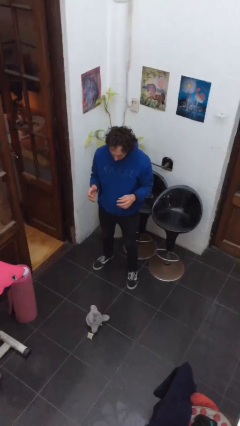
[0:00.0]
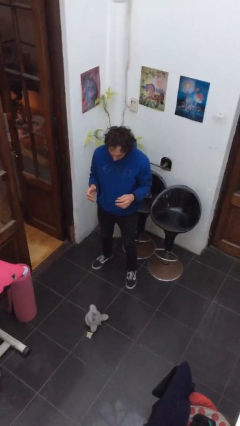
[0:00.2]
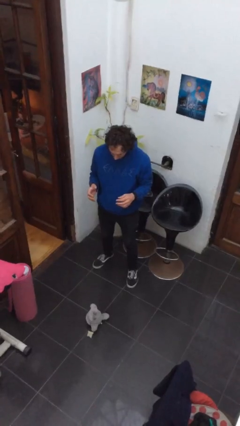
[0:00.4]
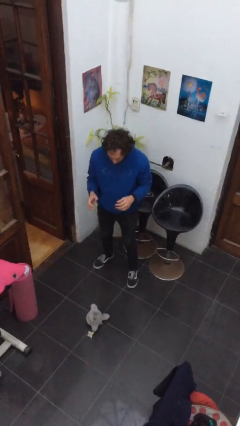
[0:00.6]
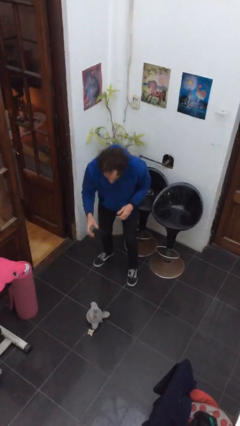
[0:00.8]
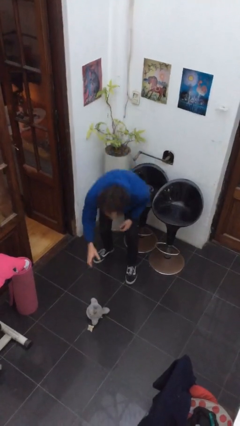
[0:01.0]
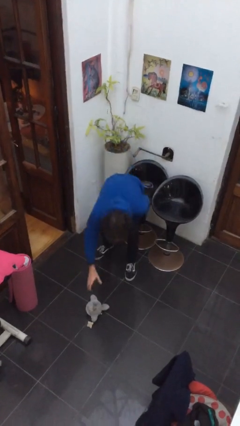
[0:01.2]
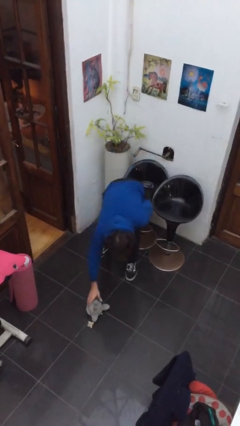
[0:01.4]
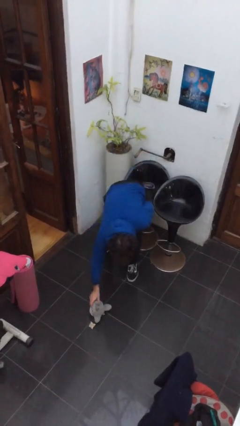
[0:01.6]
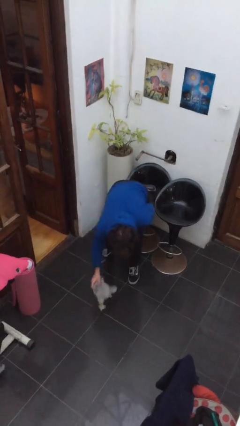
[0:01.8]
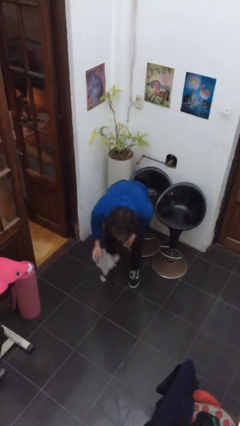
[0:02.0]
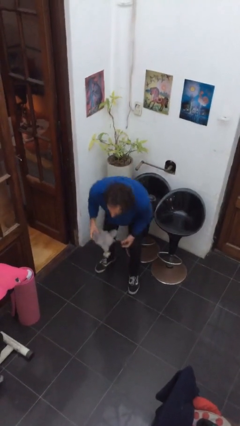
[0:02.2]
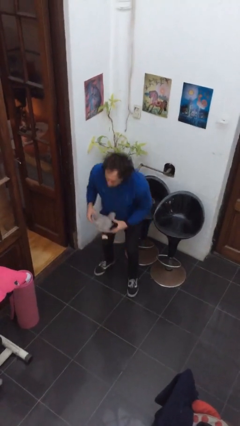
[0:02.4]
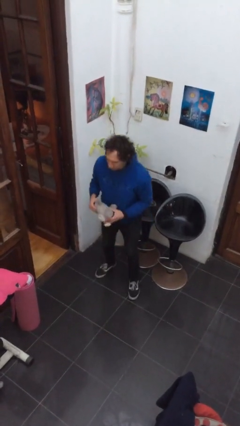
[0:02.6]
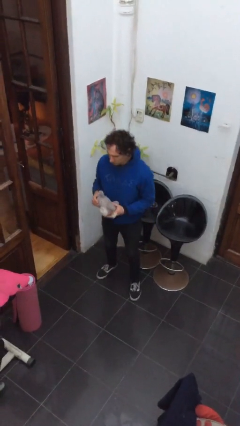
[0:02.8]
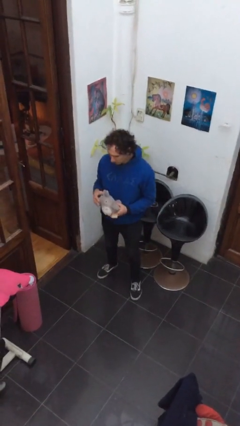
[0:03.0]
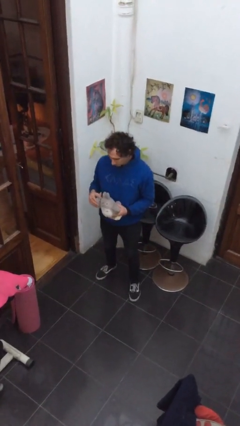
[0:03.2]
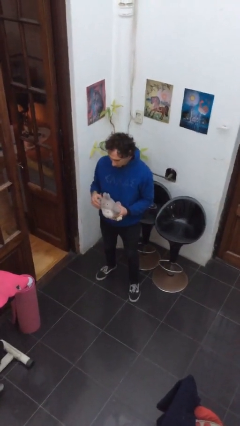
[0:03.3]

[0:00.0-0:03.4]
person picks up object from floor

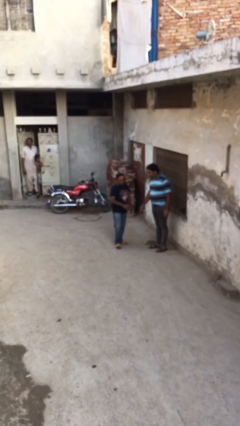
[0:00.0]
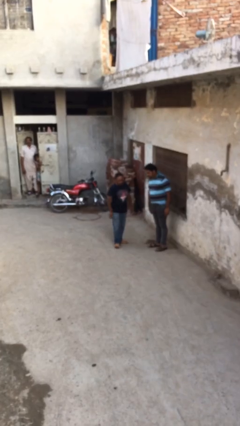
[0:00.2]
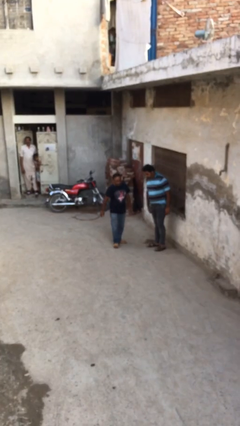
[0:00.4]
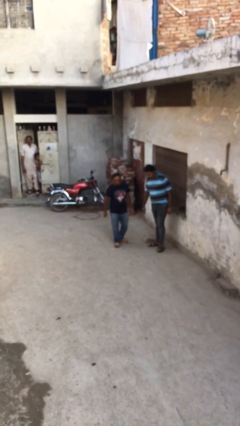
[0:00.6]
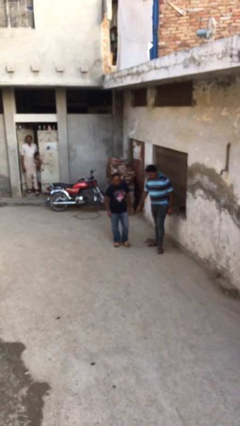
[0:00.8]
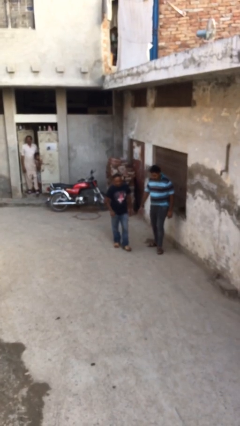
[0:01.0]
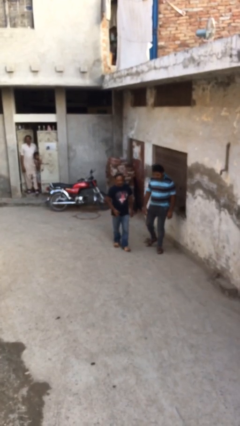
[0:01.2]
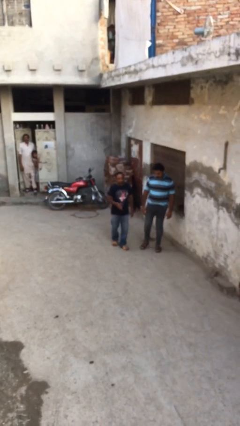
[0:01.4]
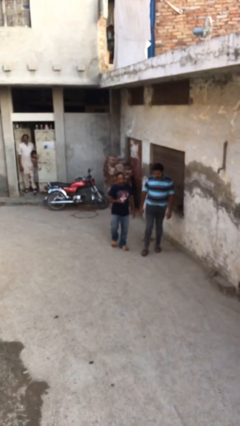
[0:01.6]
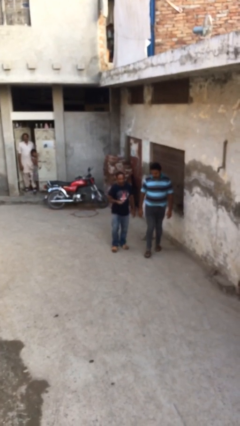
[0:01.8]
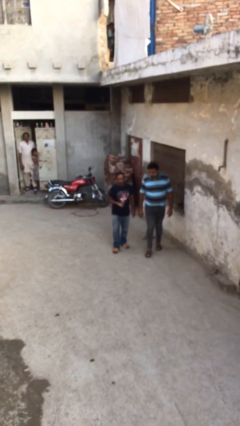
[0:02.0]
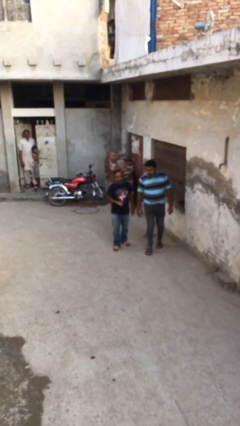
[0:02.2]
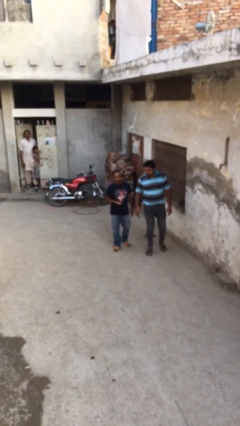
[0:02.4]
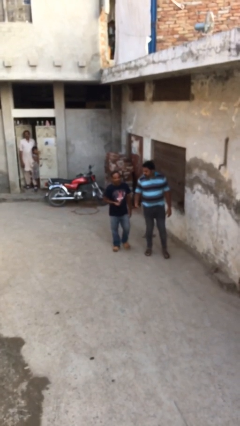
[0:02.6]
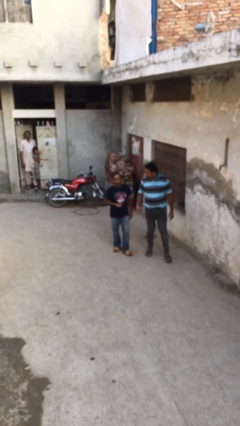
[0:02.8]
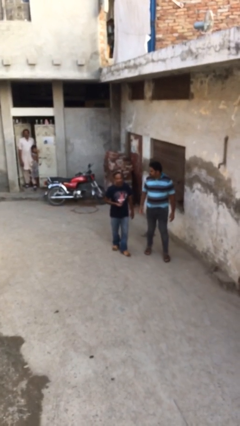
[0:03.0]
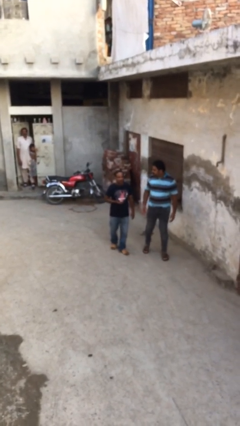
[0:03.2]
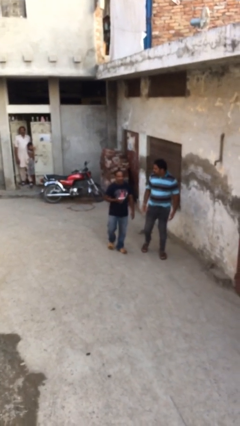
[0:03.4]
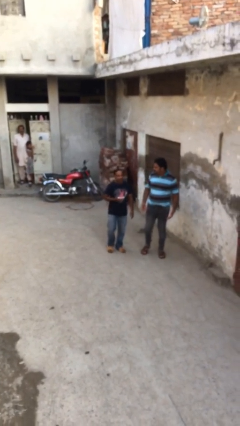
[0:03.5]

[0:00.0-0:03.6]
person talks to person

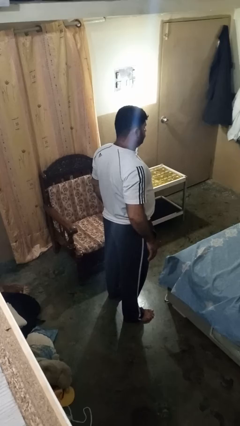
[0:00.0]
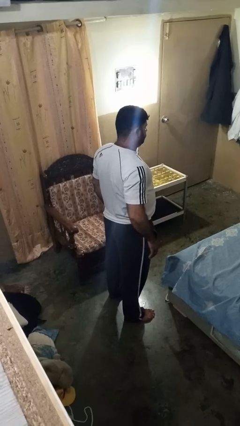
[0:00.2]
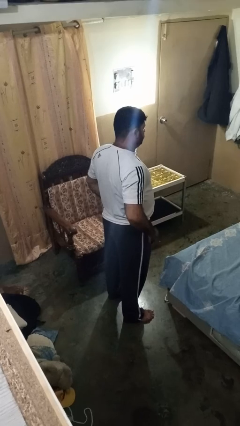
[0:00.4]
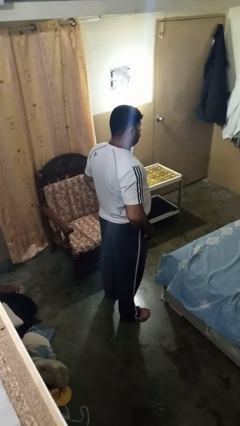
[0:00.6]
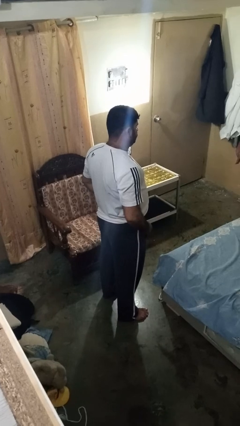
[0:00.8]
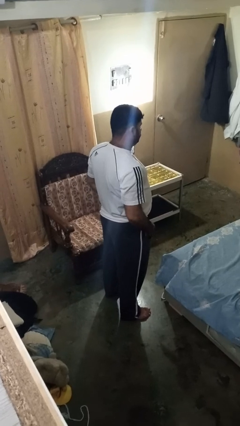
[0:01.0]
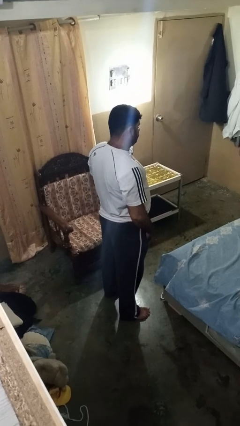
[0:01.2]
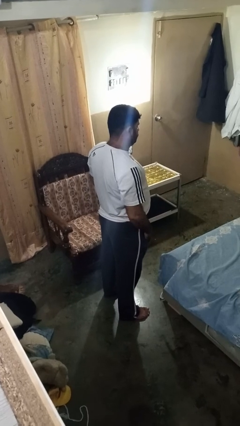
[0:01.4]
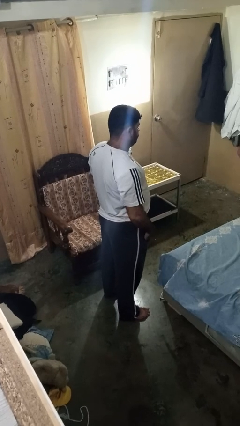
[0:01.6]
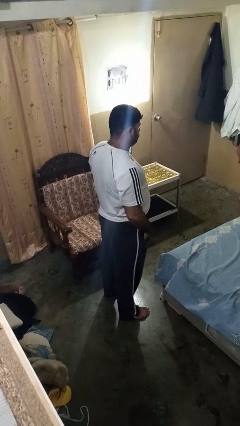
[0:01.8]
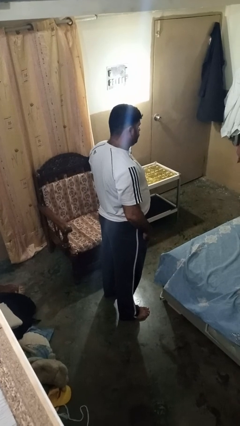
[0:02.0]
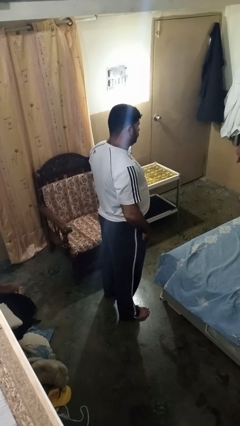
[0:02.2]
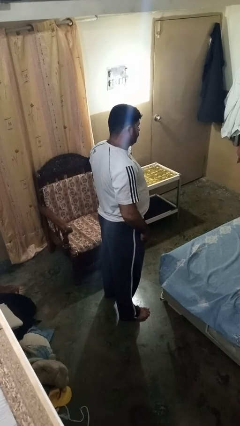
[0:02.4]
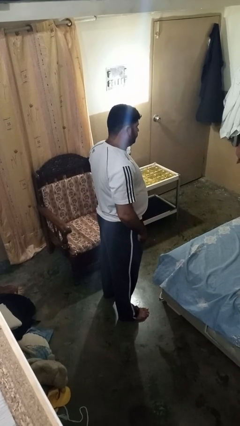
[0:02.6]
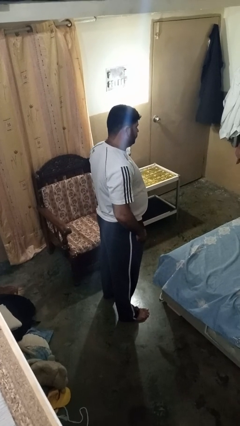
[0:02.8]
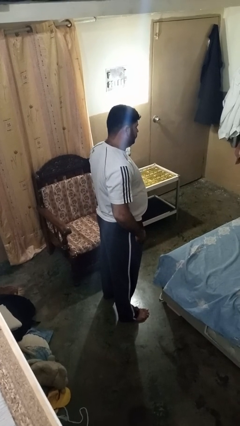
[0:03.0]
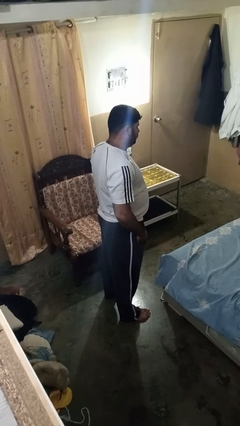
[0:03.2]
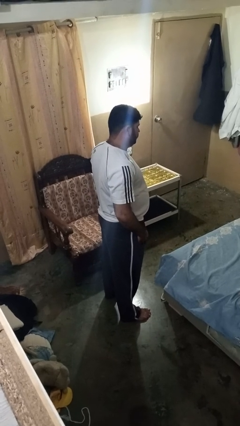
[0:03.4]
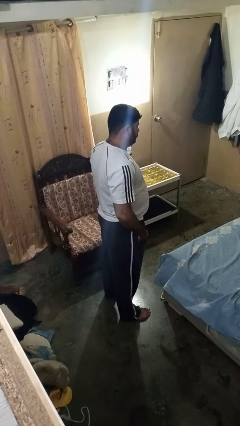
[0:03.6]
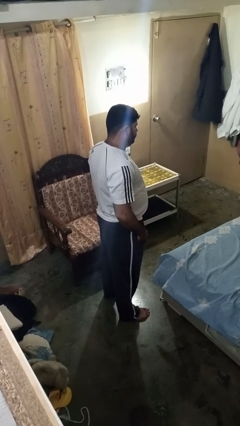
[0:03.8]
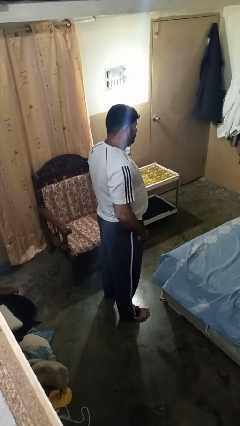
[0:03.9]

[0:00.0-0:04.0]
person puts hands in back pockets

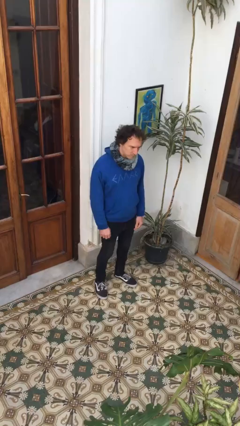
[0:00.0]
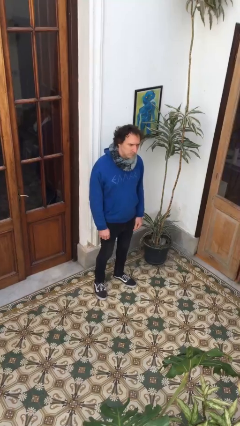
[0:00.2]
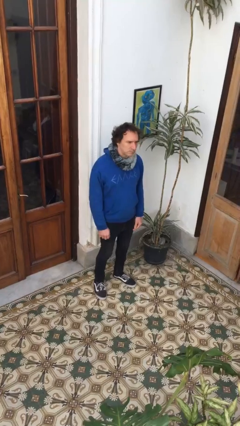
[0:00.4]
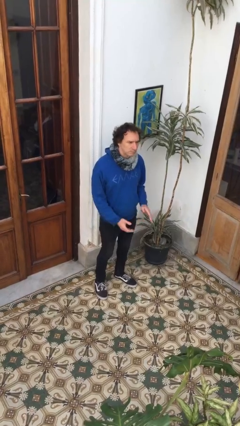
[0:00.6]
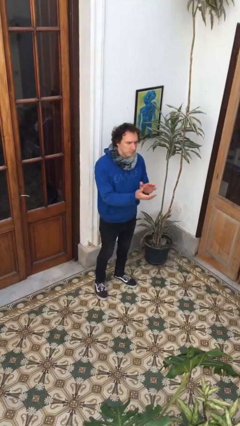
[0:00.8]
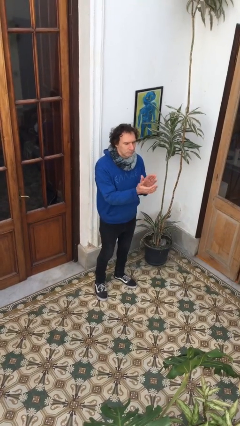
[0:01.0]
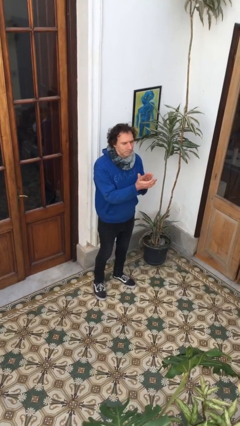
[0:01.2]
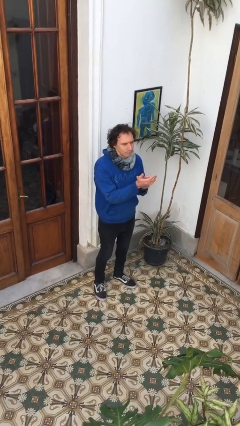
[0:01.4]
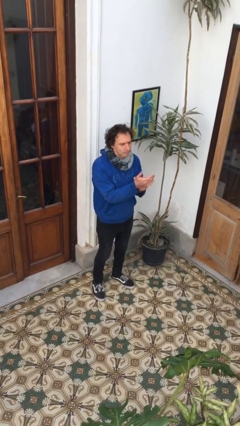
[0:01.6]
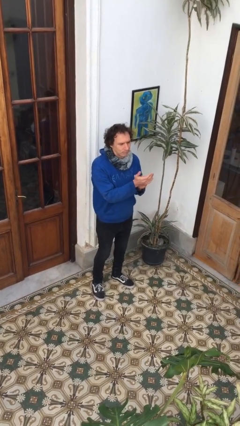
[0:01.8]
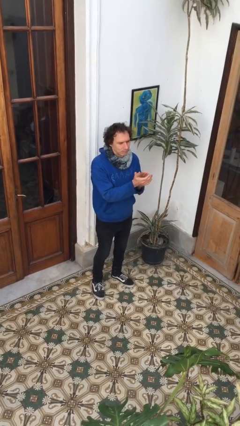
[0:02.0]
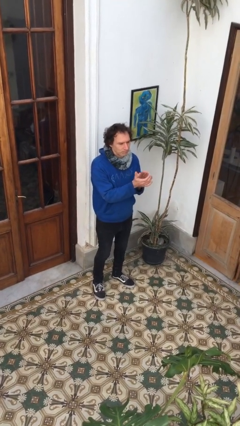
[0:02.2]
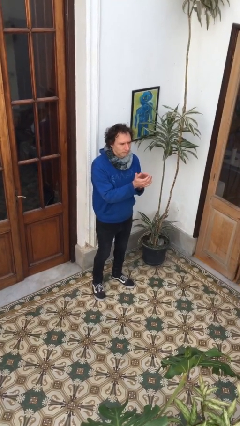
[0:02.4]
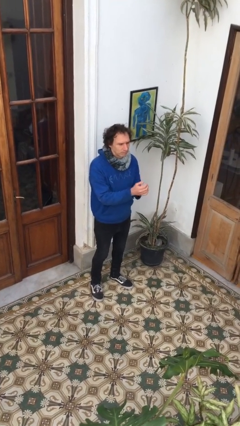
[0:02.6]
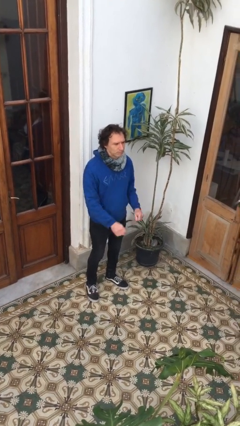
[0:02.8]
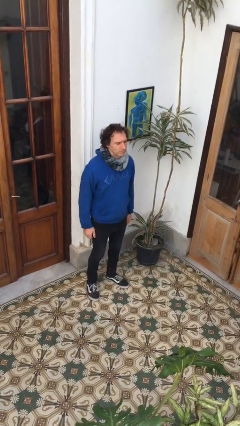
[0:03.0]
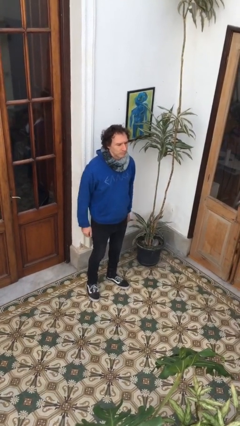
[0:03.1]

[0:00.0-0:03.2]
person claps hands

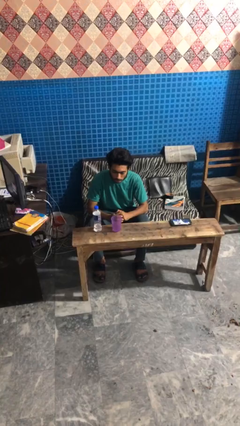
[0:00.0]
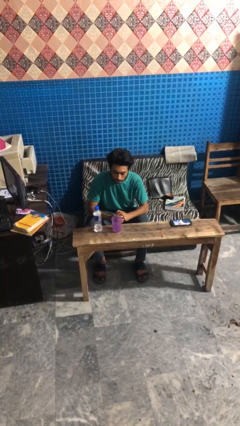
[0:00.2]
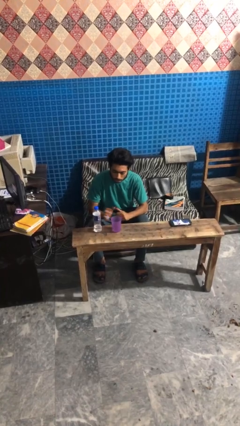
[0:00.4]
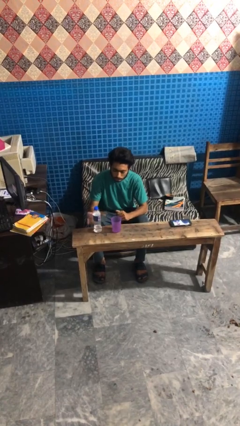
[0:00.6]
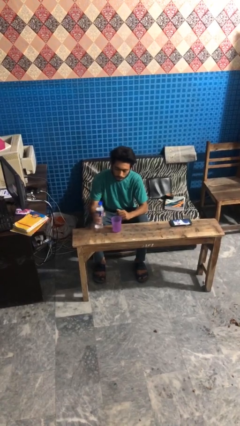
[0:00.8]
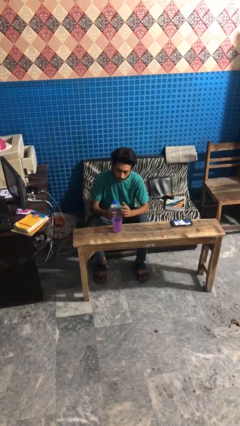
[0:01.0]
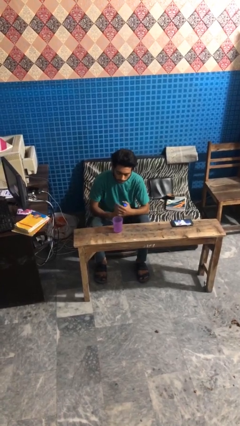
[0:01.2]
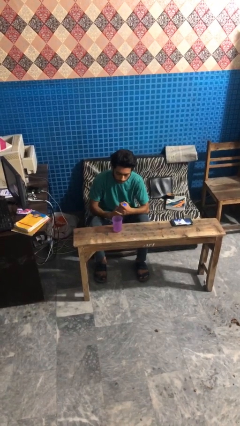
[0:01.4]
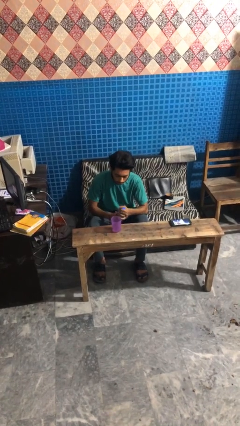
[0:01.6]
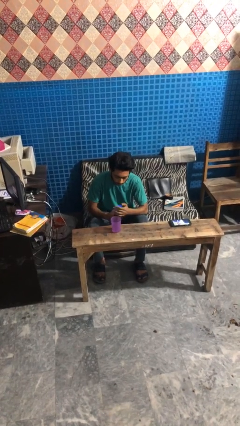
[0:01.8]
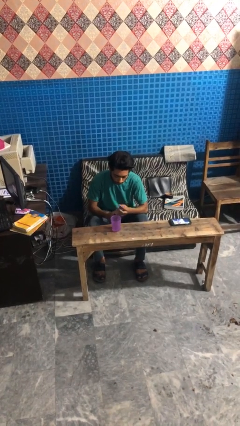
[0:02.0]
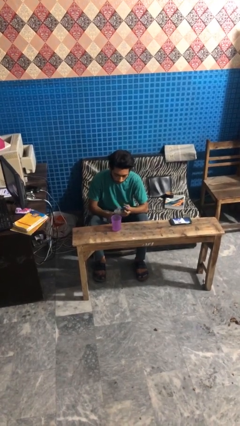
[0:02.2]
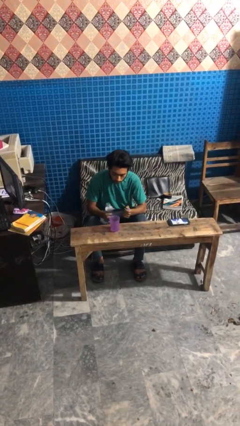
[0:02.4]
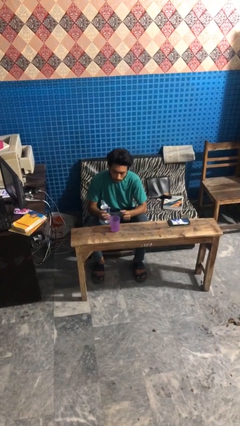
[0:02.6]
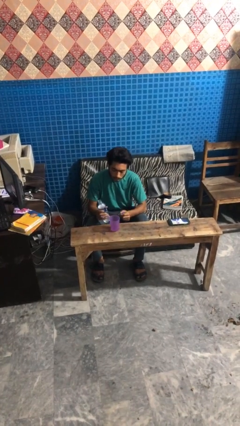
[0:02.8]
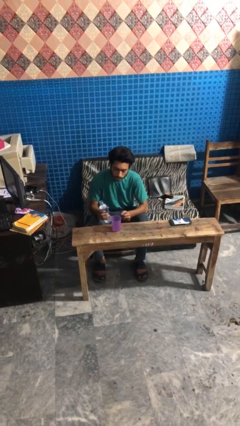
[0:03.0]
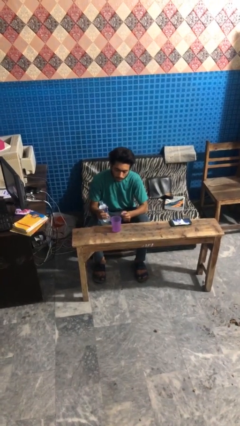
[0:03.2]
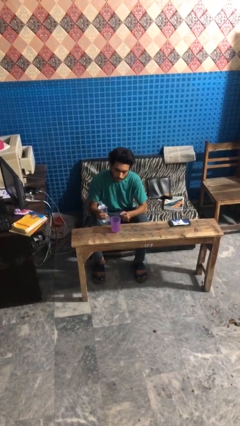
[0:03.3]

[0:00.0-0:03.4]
person unscrews lid from bottle
